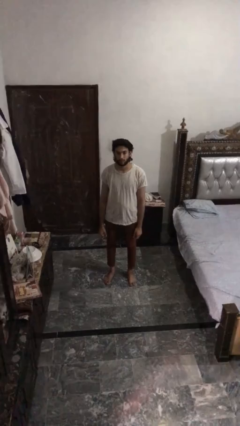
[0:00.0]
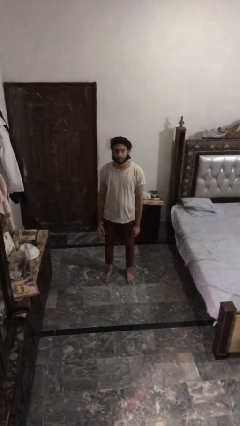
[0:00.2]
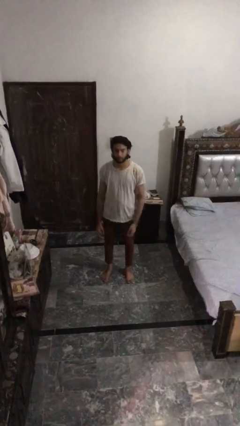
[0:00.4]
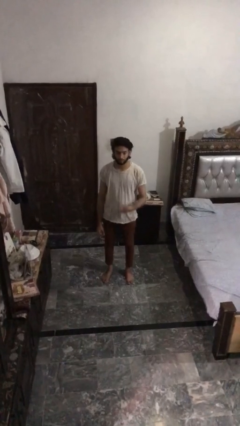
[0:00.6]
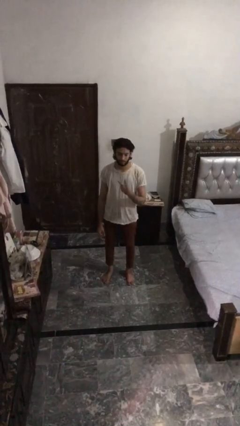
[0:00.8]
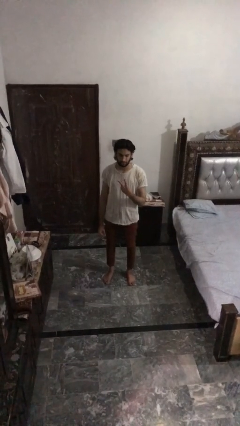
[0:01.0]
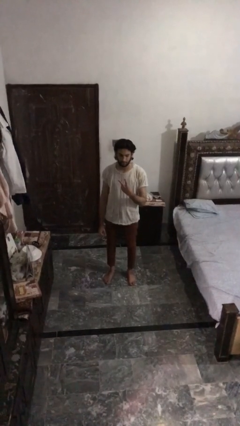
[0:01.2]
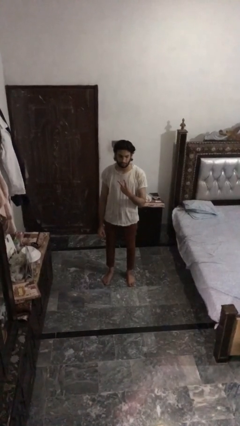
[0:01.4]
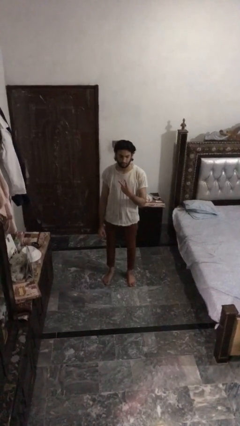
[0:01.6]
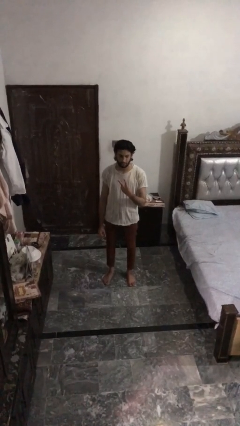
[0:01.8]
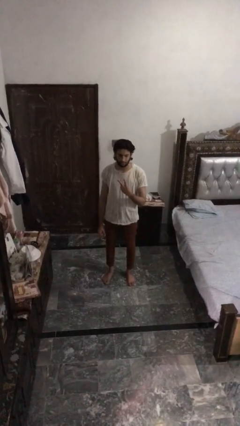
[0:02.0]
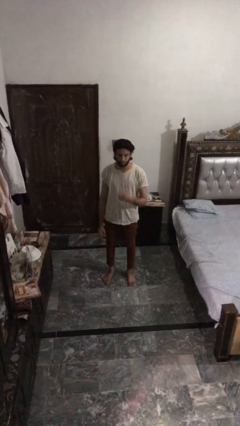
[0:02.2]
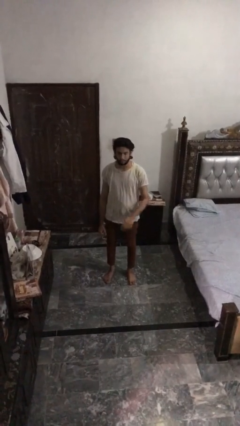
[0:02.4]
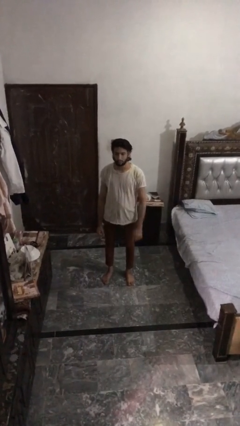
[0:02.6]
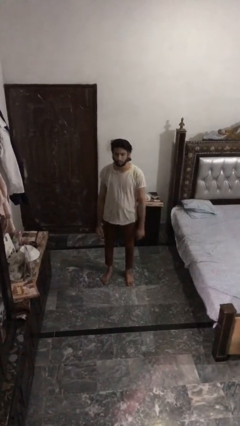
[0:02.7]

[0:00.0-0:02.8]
person gestures peace

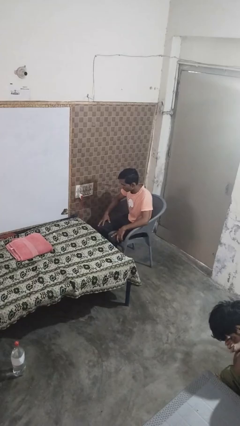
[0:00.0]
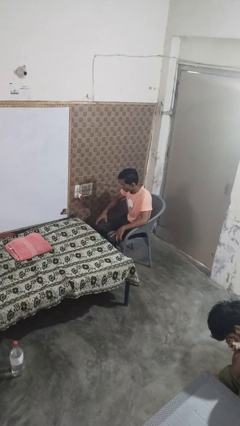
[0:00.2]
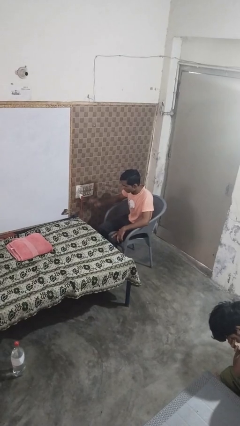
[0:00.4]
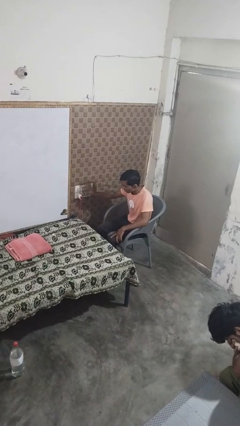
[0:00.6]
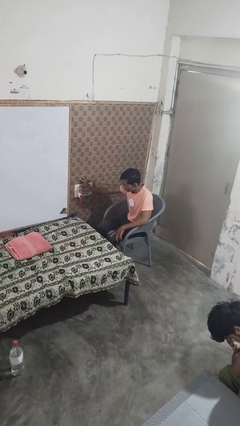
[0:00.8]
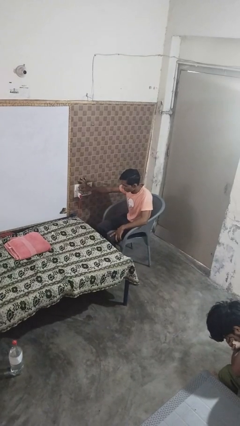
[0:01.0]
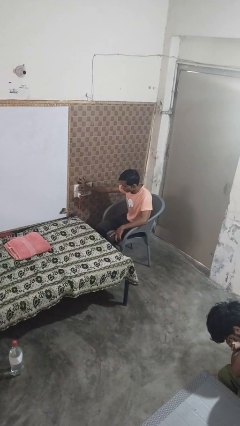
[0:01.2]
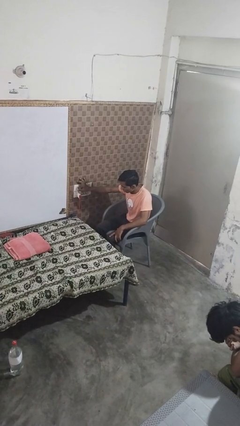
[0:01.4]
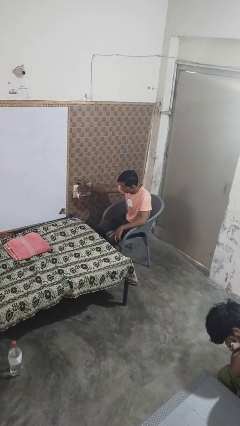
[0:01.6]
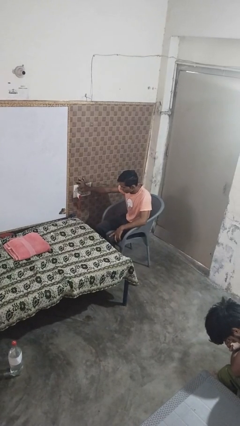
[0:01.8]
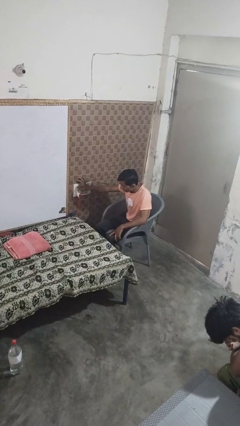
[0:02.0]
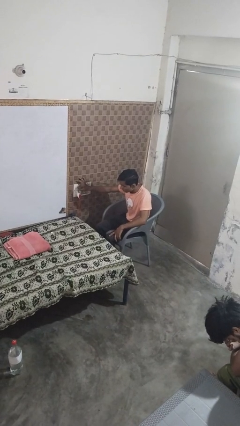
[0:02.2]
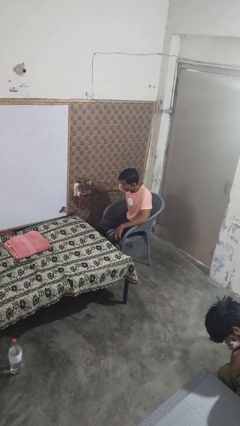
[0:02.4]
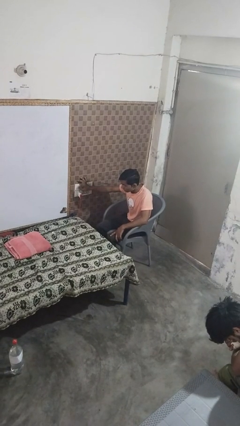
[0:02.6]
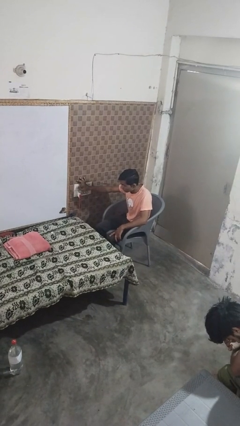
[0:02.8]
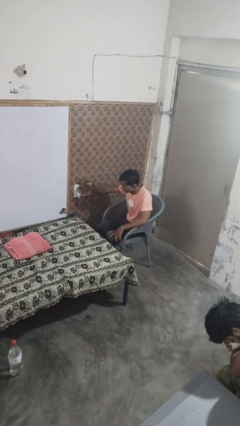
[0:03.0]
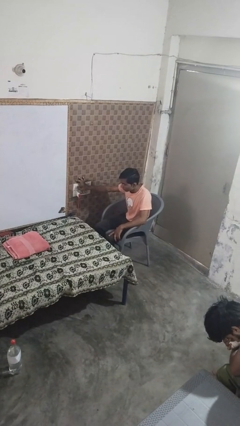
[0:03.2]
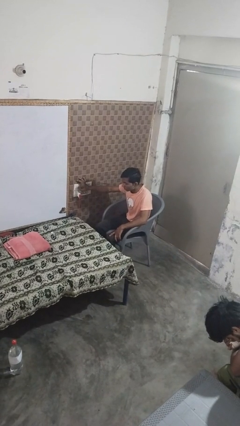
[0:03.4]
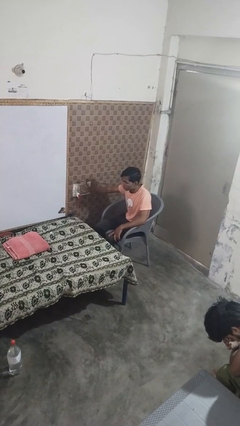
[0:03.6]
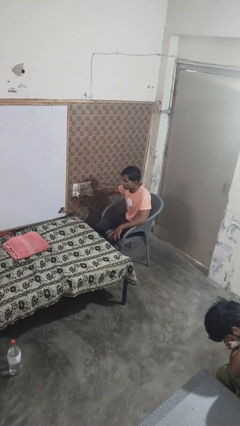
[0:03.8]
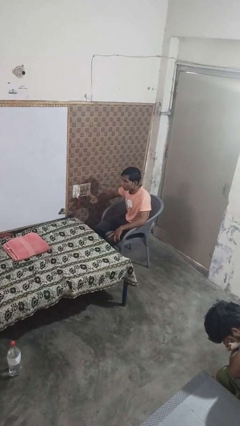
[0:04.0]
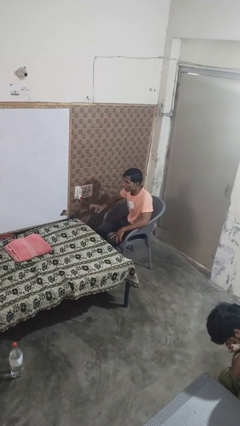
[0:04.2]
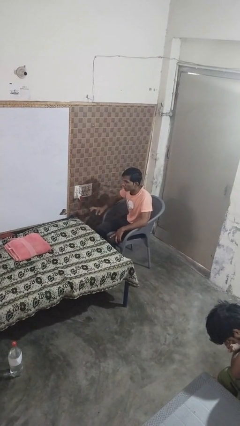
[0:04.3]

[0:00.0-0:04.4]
person adjusts thermostat

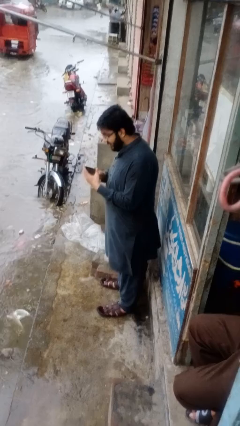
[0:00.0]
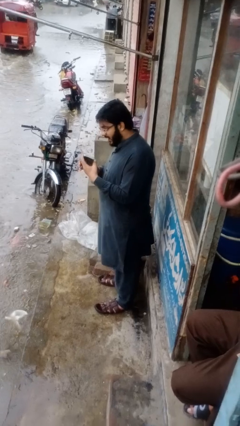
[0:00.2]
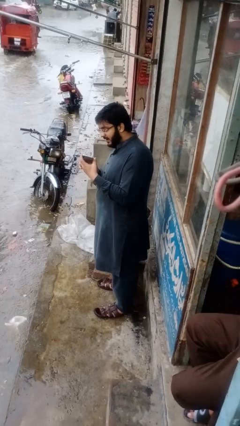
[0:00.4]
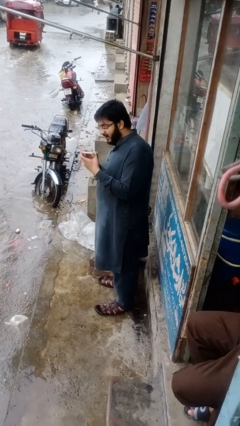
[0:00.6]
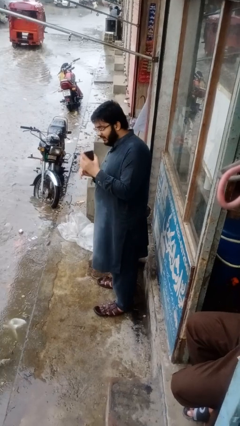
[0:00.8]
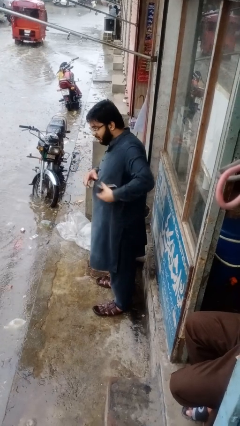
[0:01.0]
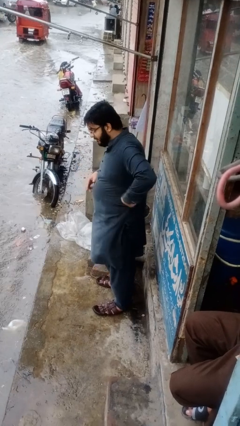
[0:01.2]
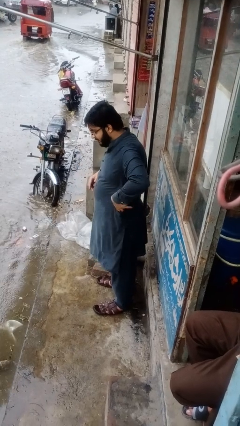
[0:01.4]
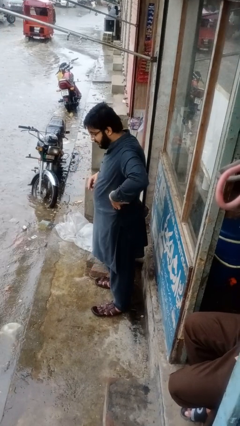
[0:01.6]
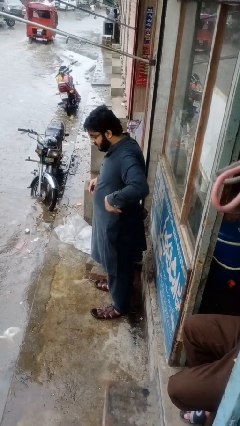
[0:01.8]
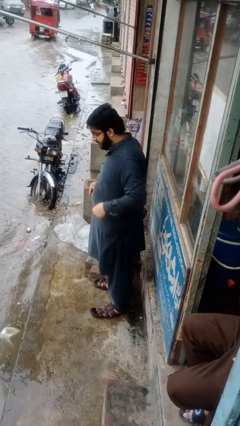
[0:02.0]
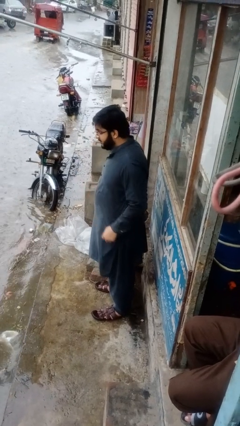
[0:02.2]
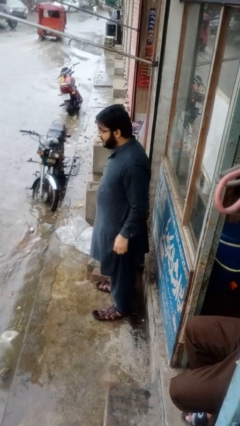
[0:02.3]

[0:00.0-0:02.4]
person puts phone into pocket

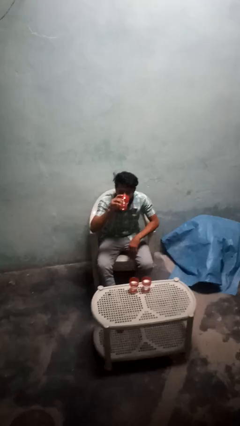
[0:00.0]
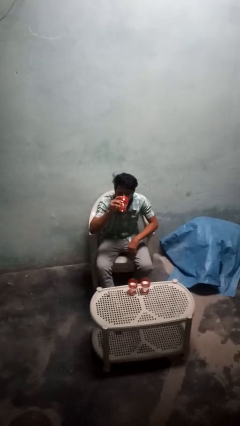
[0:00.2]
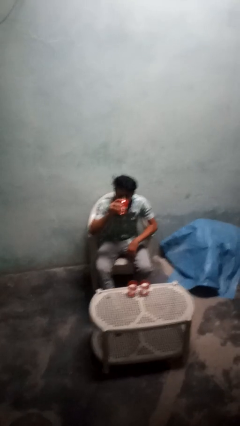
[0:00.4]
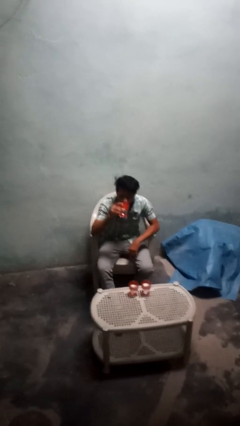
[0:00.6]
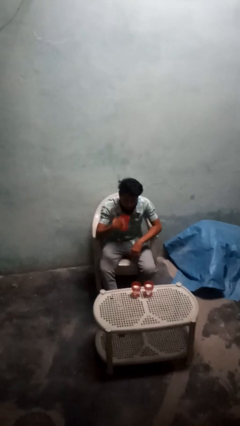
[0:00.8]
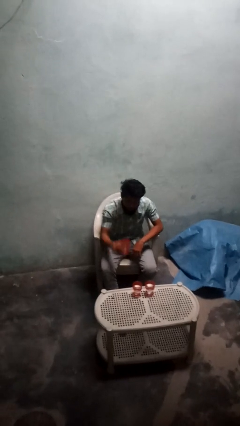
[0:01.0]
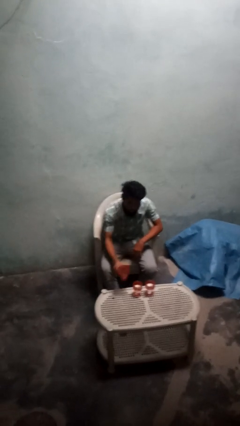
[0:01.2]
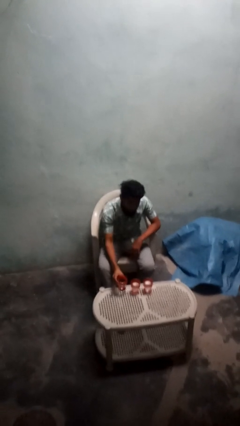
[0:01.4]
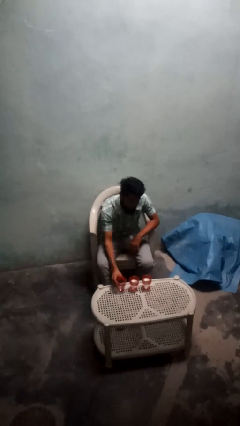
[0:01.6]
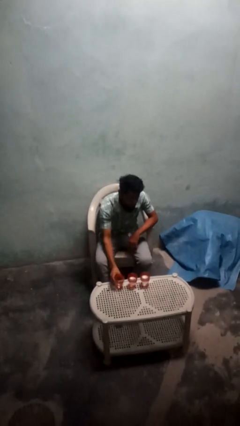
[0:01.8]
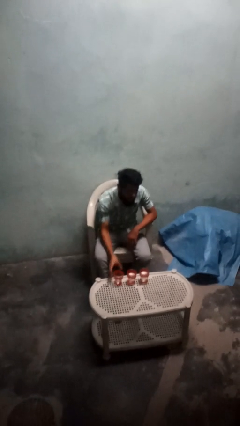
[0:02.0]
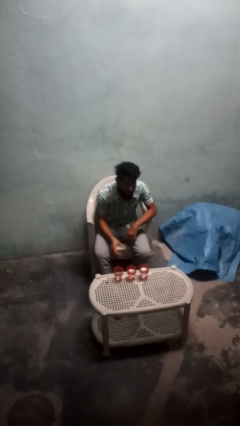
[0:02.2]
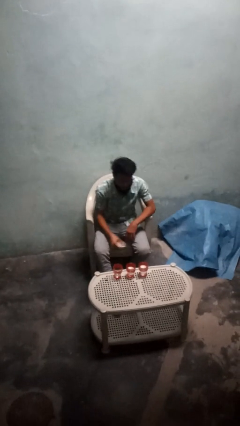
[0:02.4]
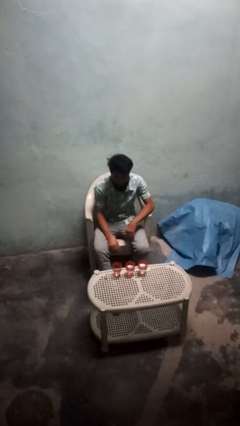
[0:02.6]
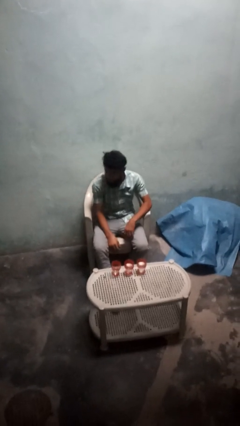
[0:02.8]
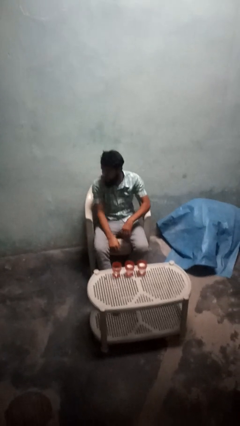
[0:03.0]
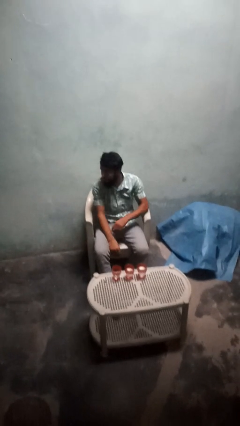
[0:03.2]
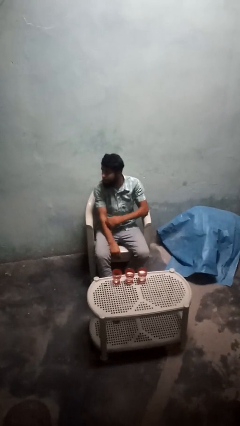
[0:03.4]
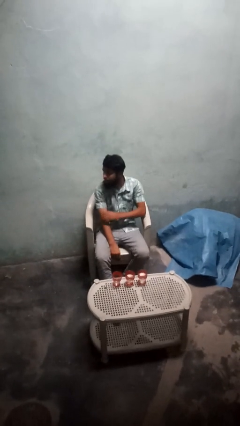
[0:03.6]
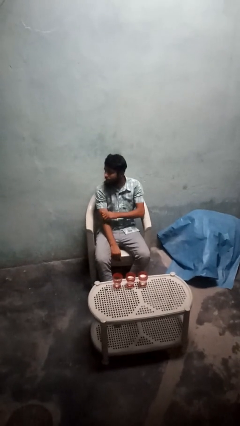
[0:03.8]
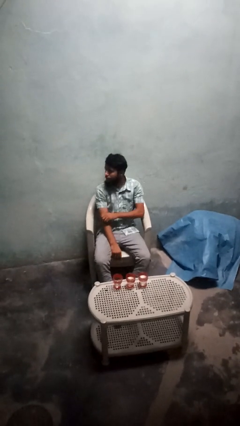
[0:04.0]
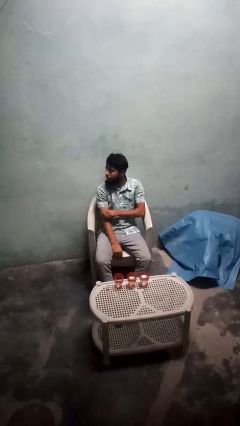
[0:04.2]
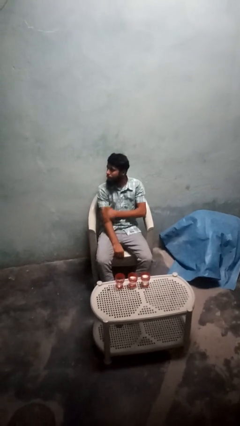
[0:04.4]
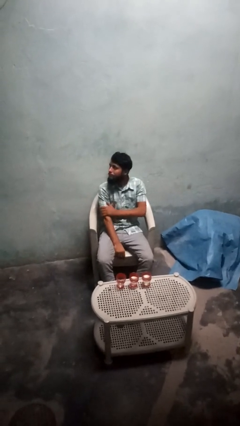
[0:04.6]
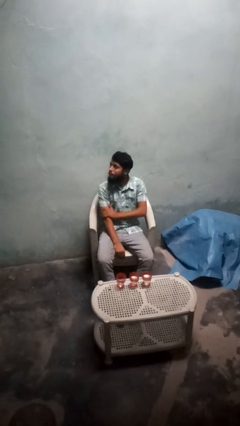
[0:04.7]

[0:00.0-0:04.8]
person puts down object on table

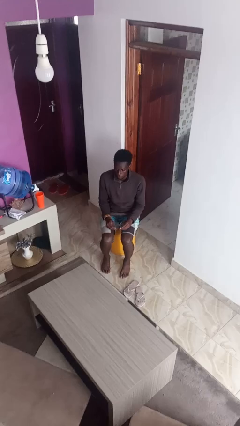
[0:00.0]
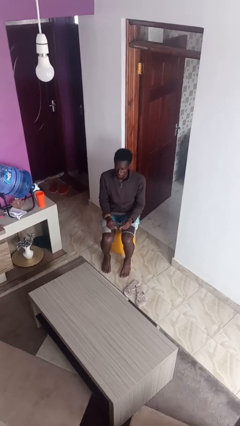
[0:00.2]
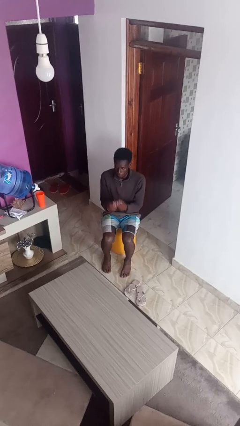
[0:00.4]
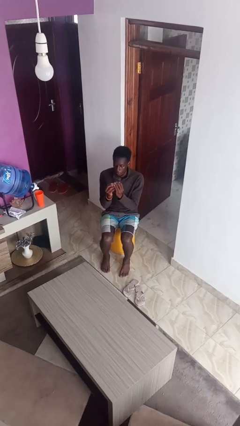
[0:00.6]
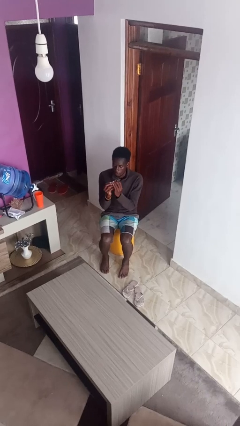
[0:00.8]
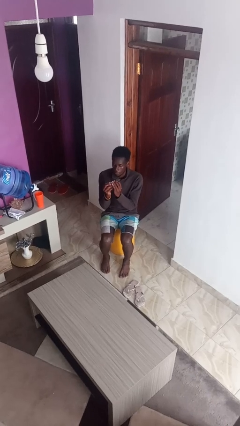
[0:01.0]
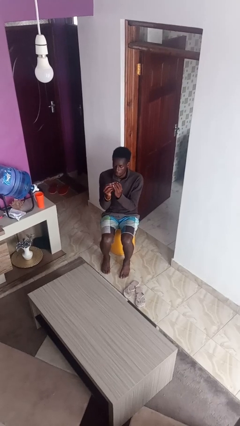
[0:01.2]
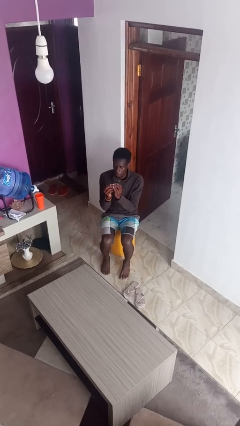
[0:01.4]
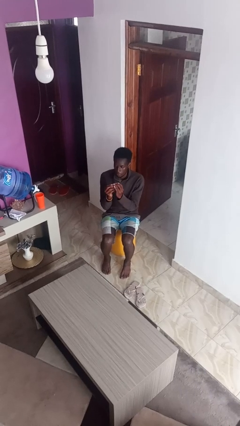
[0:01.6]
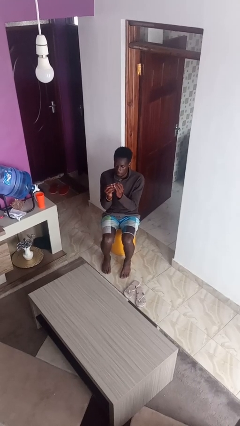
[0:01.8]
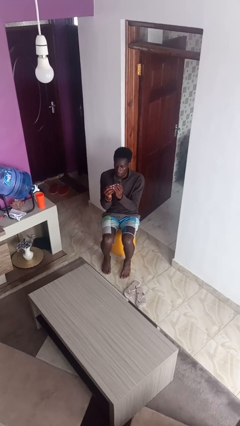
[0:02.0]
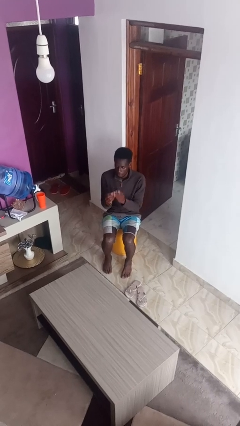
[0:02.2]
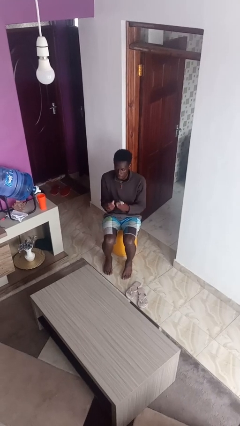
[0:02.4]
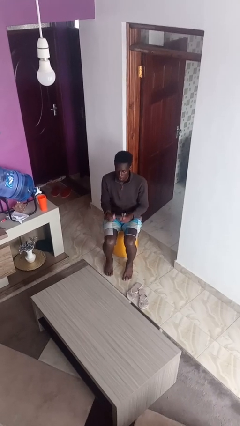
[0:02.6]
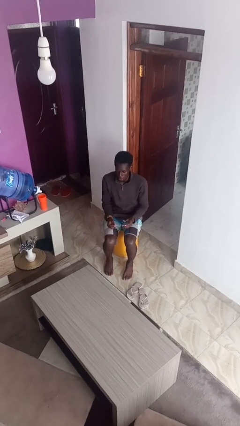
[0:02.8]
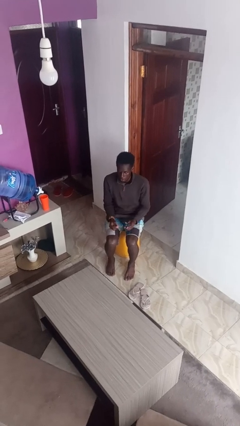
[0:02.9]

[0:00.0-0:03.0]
person clips fingernails
